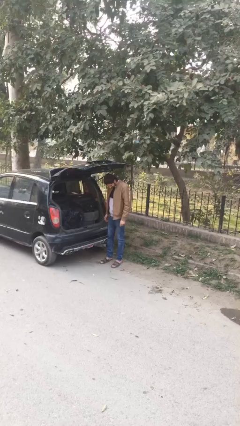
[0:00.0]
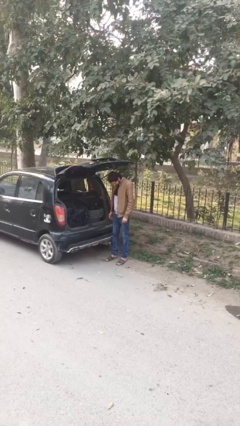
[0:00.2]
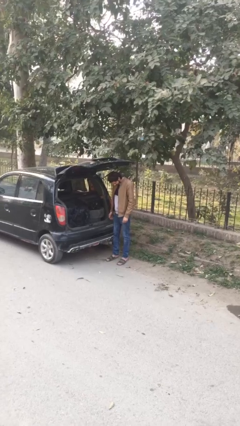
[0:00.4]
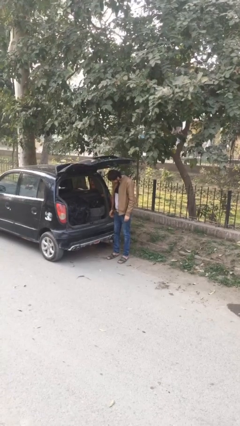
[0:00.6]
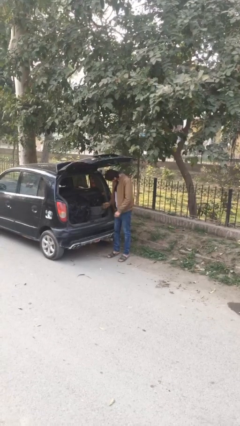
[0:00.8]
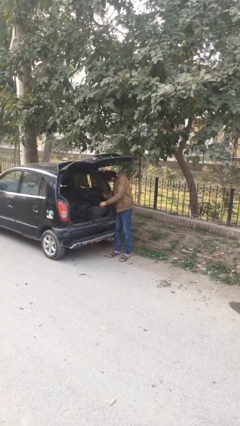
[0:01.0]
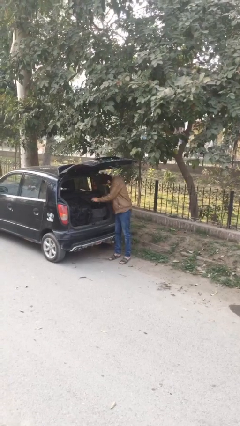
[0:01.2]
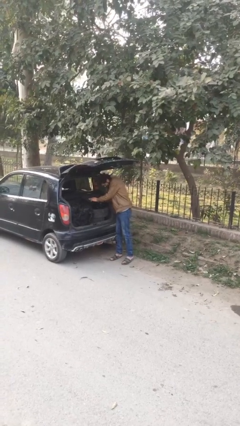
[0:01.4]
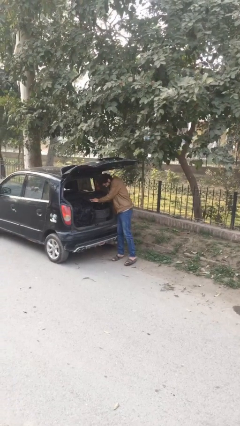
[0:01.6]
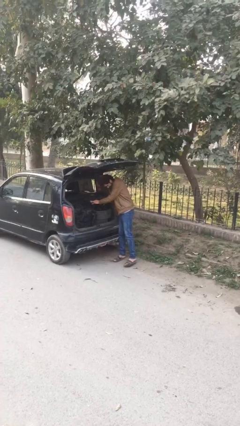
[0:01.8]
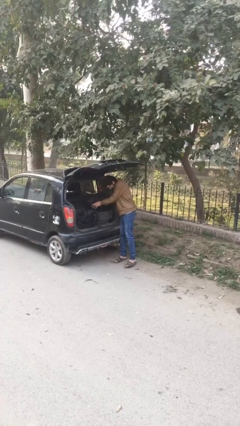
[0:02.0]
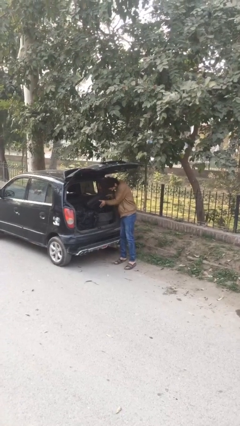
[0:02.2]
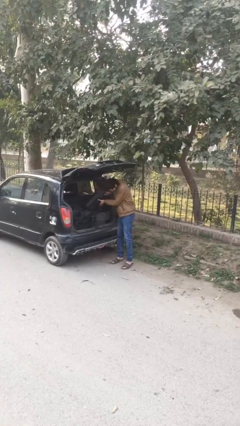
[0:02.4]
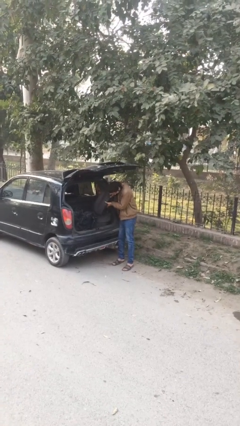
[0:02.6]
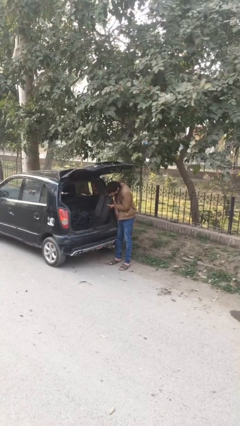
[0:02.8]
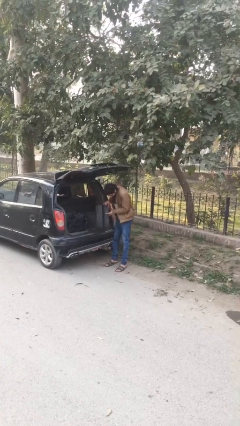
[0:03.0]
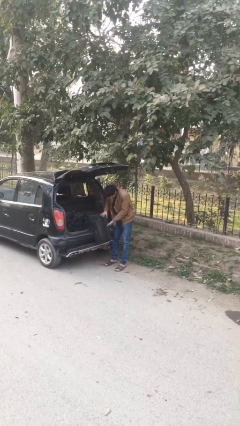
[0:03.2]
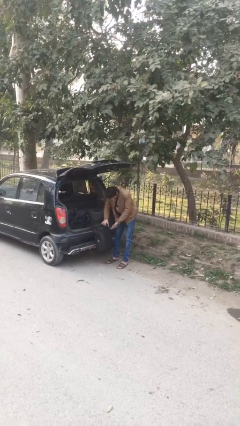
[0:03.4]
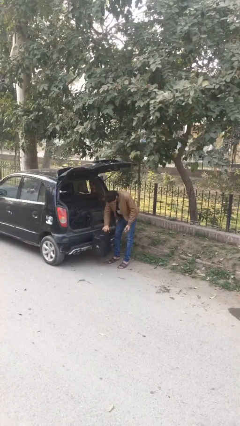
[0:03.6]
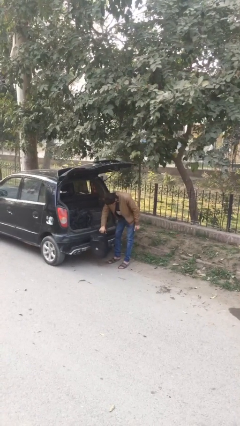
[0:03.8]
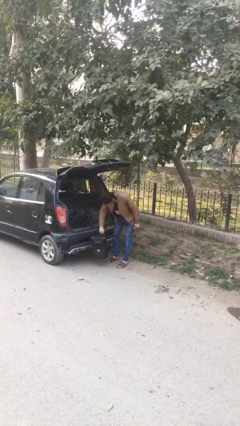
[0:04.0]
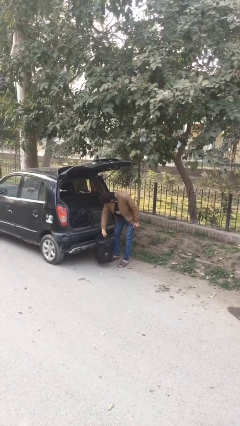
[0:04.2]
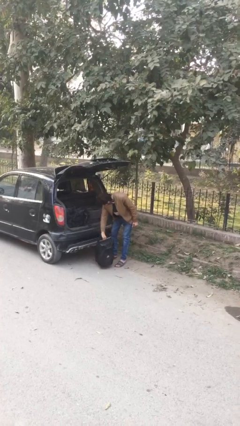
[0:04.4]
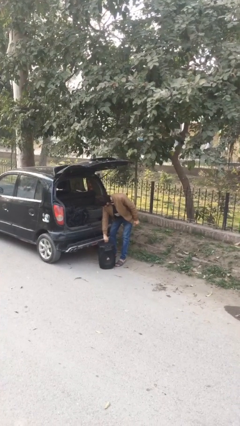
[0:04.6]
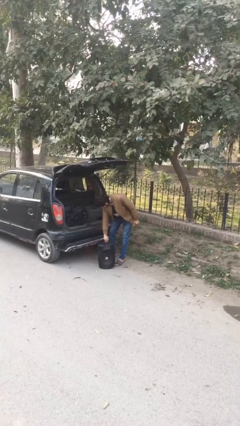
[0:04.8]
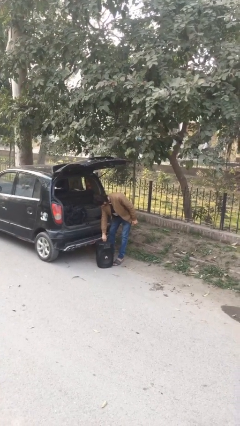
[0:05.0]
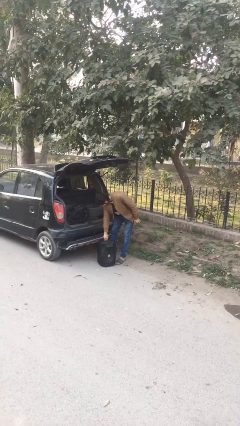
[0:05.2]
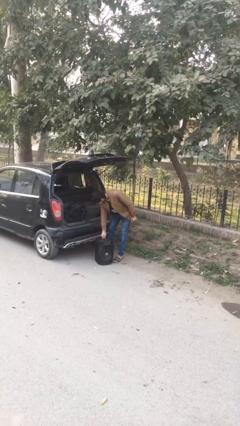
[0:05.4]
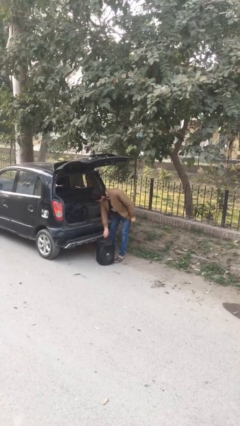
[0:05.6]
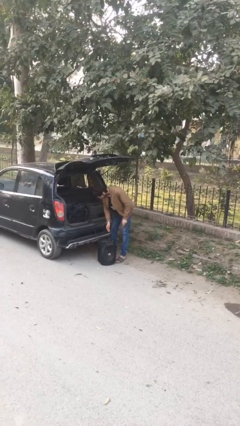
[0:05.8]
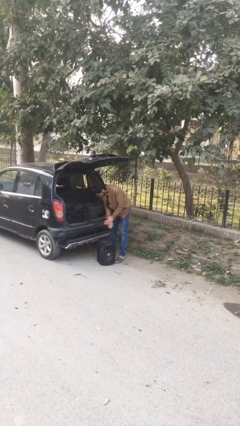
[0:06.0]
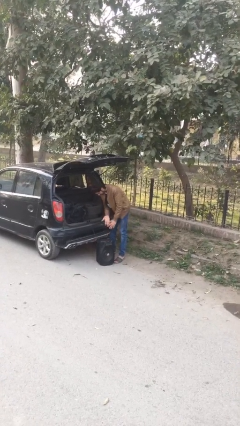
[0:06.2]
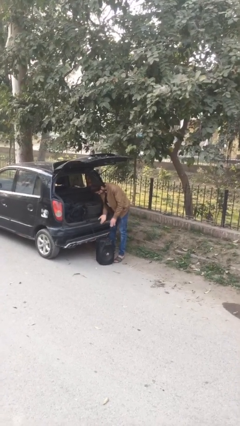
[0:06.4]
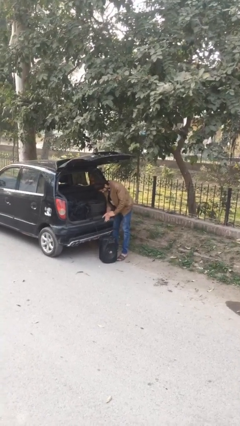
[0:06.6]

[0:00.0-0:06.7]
person unloads car

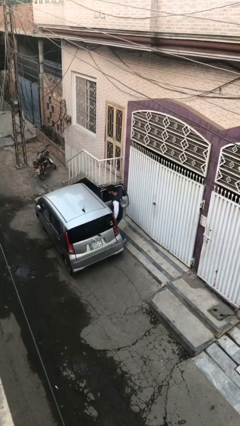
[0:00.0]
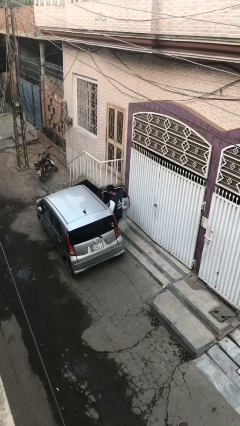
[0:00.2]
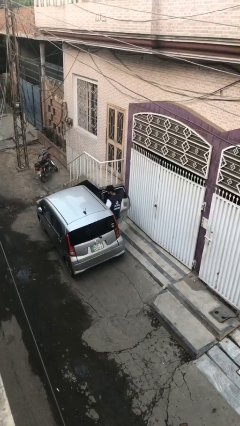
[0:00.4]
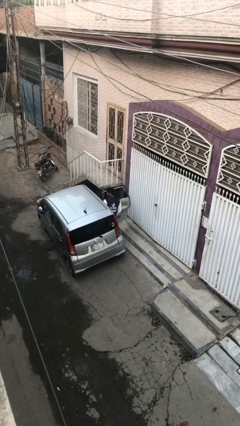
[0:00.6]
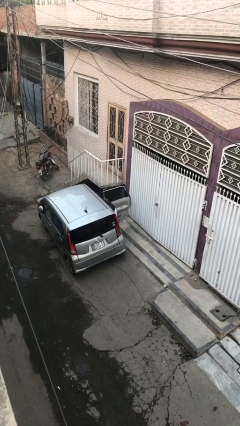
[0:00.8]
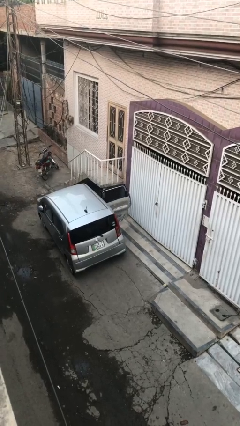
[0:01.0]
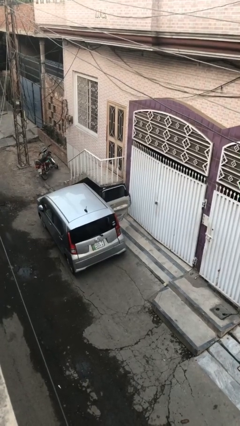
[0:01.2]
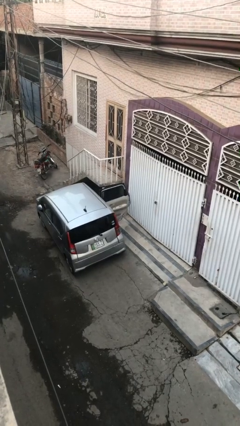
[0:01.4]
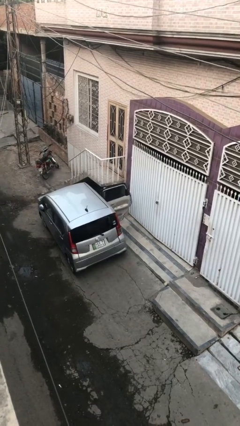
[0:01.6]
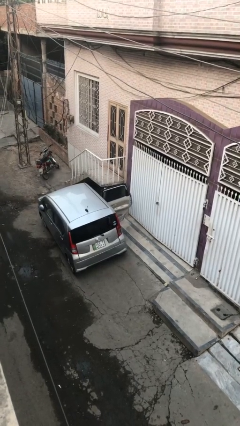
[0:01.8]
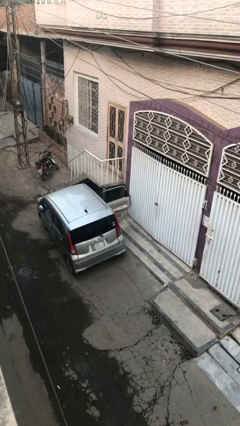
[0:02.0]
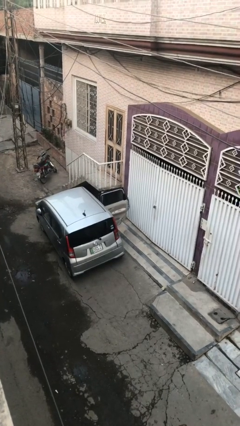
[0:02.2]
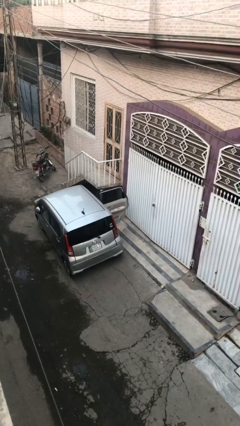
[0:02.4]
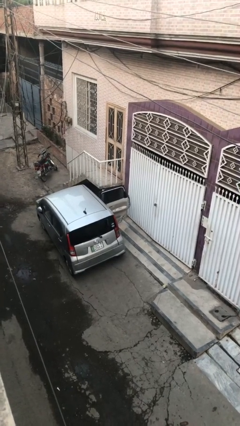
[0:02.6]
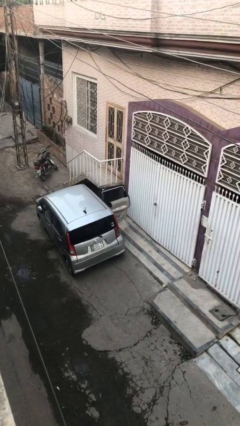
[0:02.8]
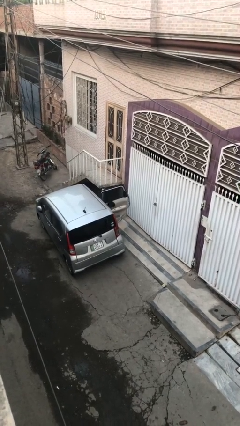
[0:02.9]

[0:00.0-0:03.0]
person enters car

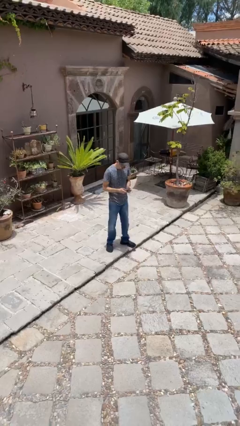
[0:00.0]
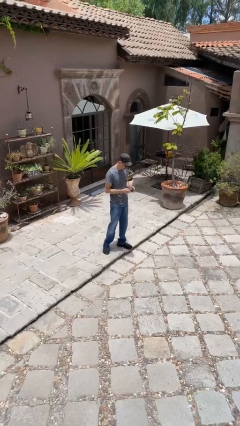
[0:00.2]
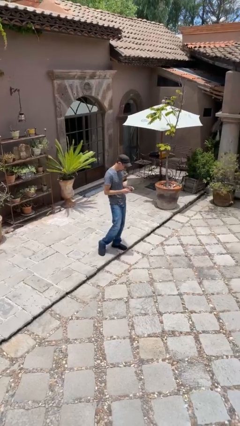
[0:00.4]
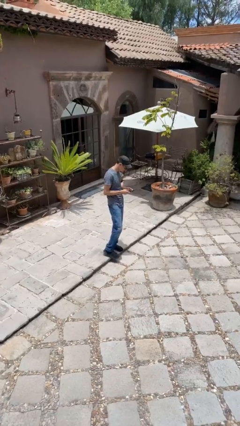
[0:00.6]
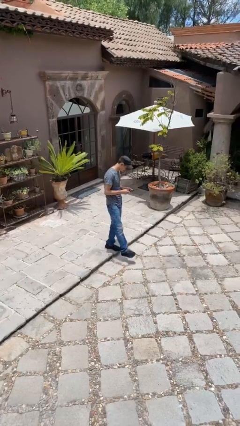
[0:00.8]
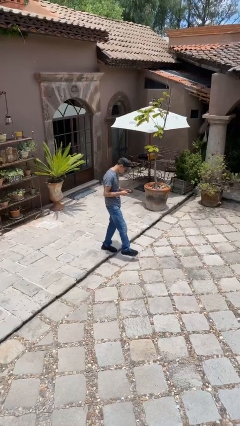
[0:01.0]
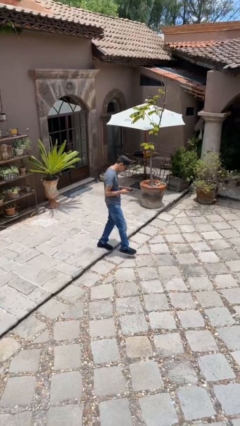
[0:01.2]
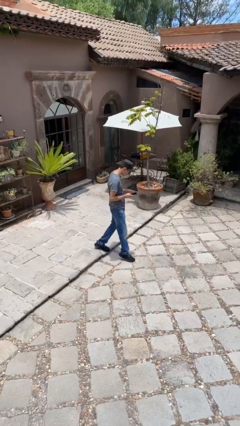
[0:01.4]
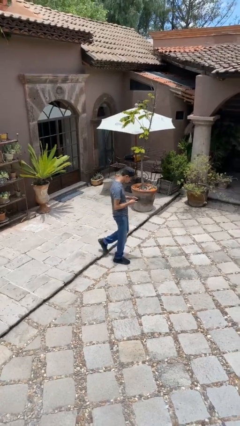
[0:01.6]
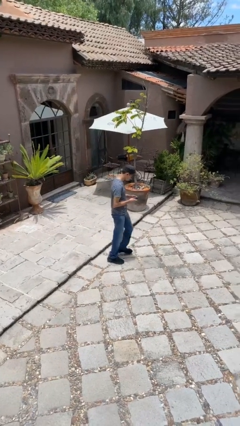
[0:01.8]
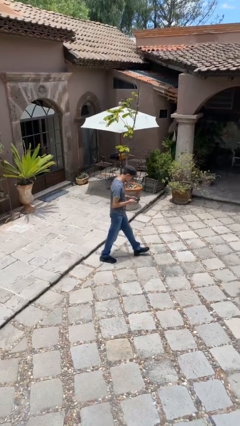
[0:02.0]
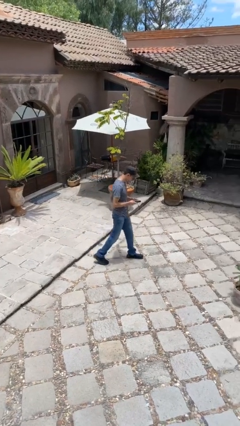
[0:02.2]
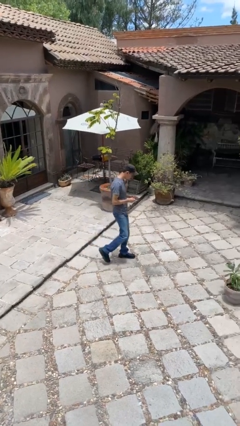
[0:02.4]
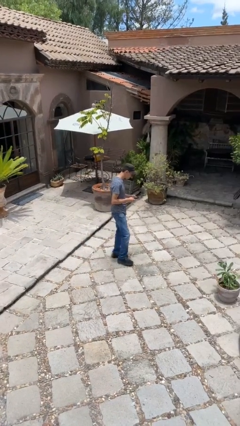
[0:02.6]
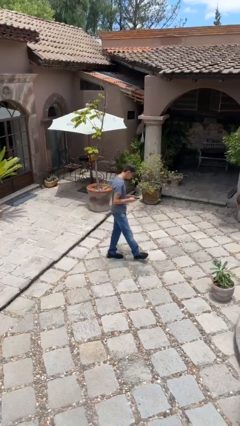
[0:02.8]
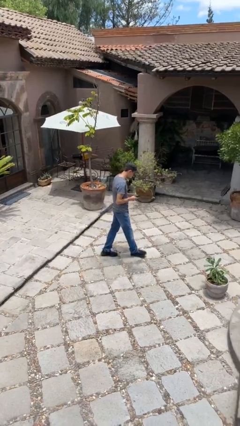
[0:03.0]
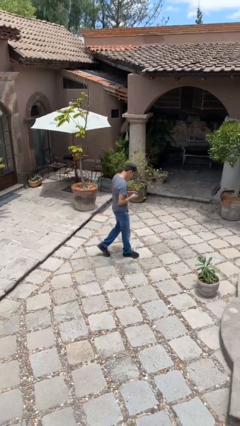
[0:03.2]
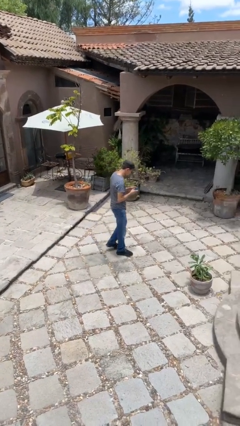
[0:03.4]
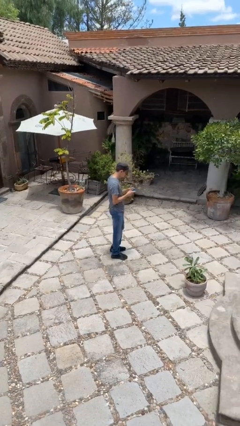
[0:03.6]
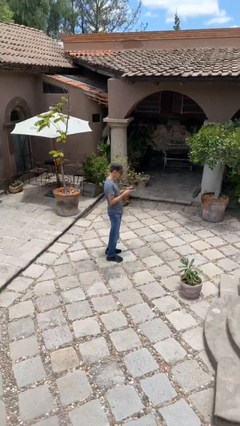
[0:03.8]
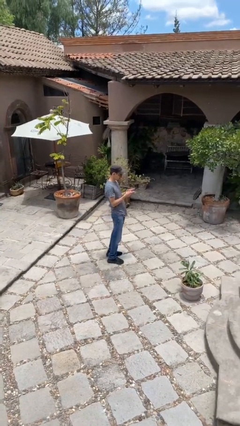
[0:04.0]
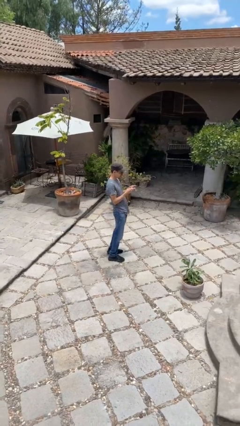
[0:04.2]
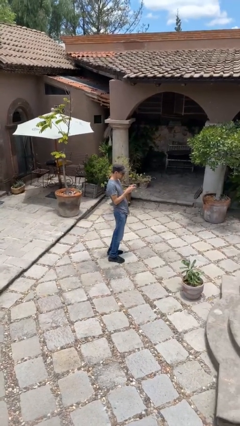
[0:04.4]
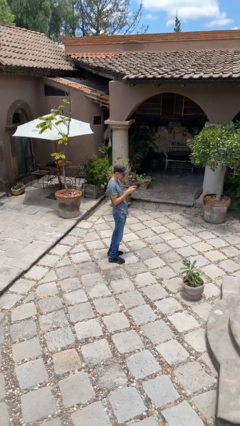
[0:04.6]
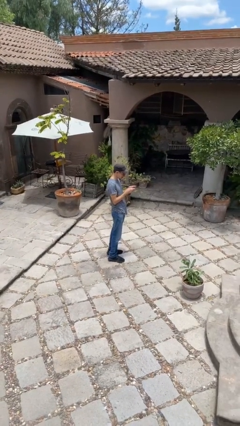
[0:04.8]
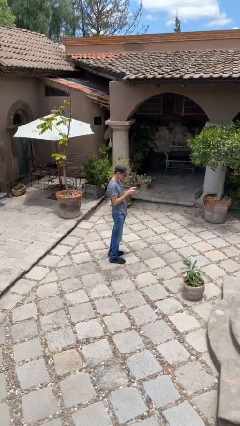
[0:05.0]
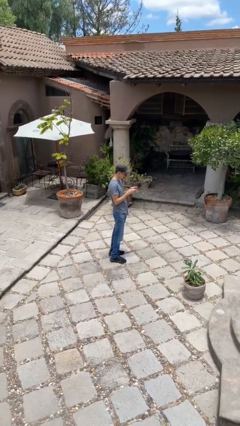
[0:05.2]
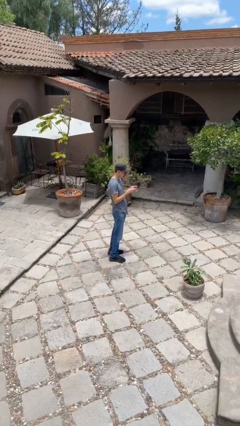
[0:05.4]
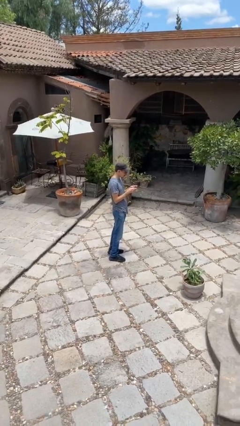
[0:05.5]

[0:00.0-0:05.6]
person texts on phone

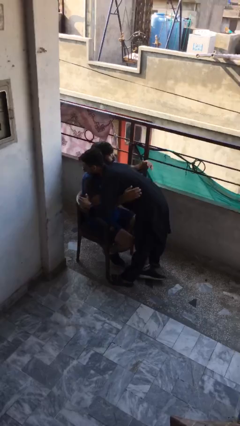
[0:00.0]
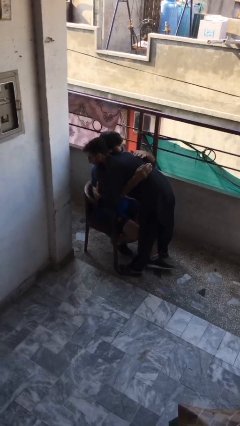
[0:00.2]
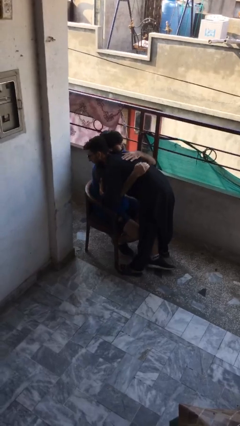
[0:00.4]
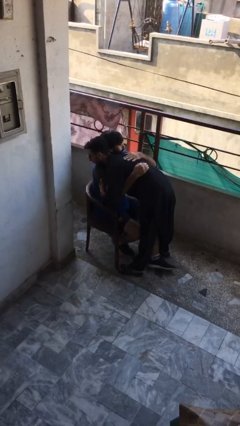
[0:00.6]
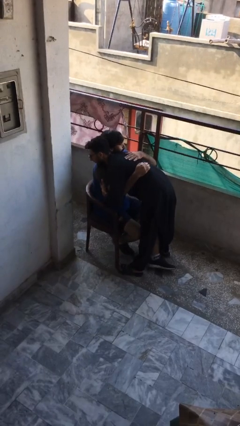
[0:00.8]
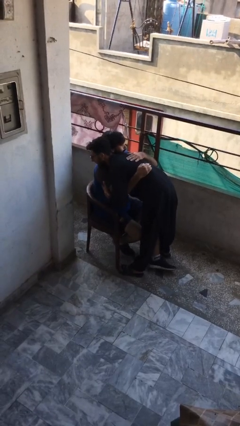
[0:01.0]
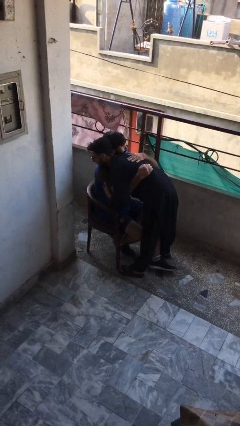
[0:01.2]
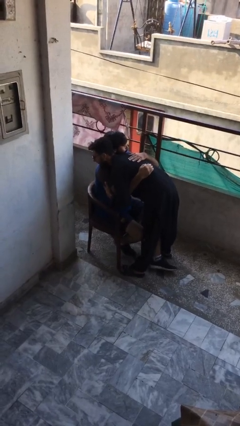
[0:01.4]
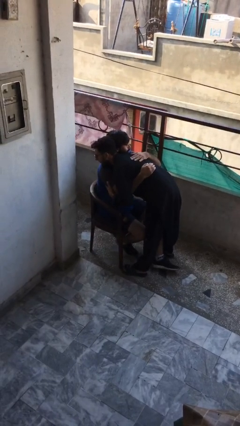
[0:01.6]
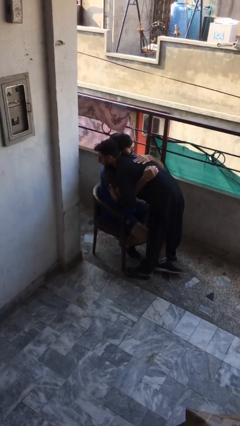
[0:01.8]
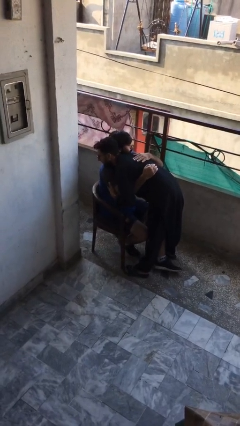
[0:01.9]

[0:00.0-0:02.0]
person embraces person

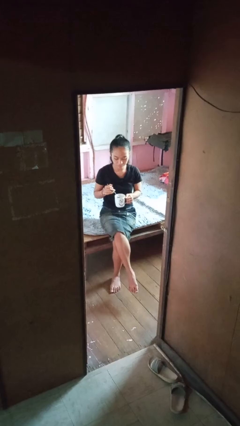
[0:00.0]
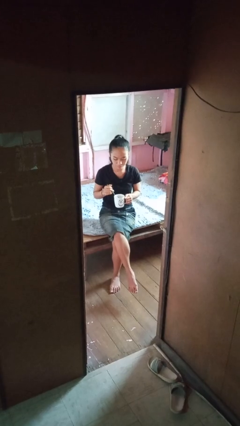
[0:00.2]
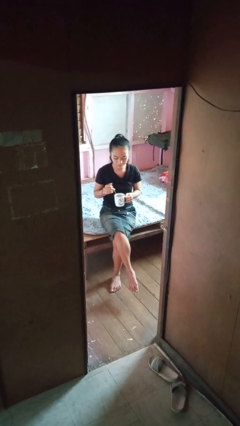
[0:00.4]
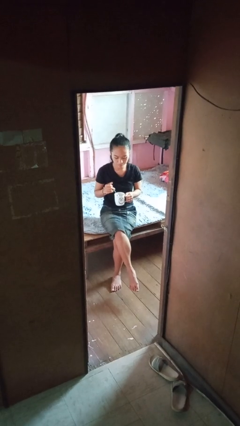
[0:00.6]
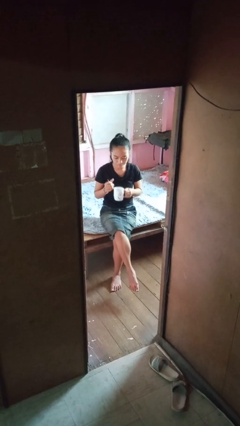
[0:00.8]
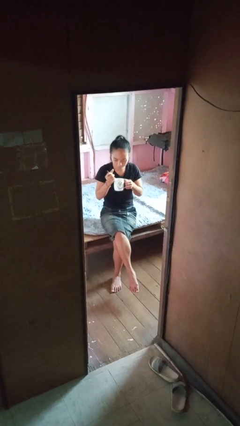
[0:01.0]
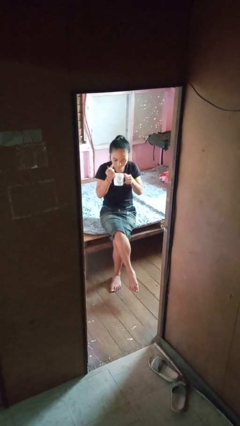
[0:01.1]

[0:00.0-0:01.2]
person stirs mug
